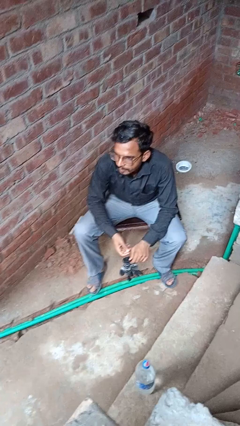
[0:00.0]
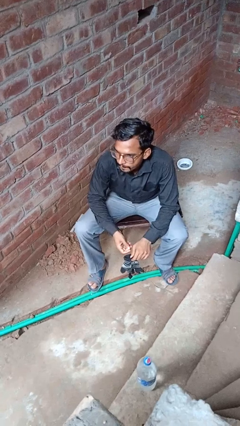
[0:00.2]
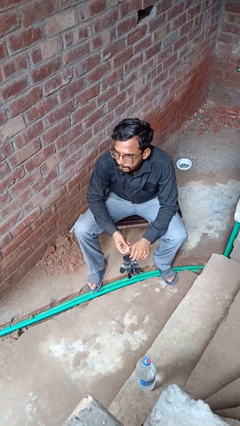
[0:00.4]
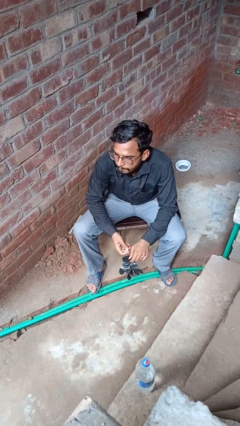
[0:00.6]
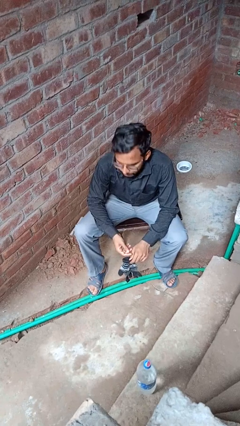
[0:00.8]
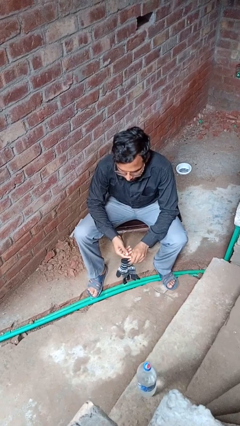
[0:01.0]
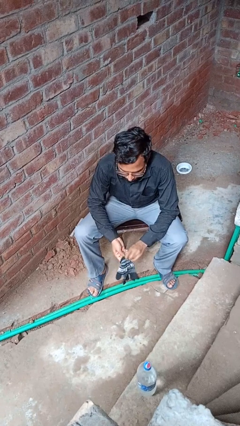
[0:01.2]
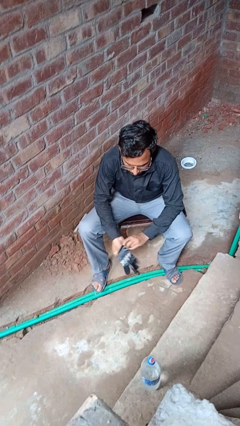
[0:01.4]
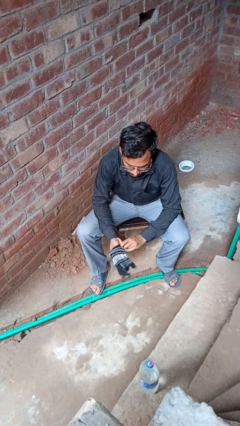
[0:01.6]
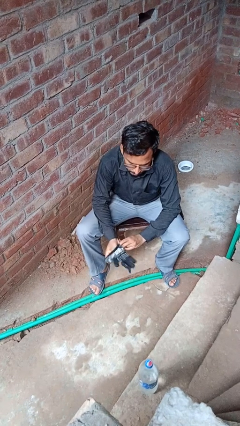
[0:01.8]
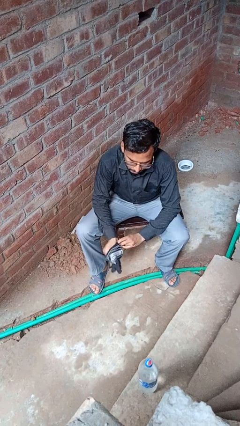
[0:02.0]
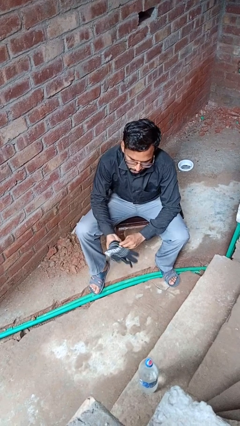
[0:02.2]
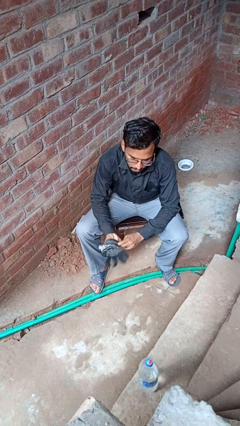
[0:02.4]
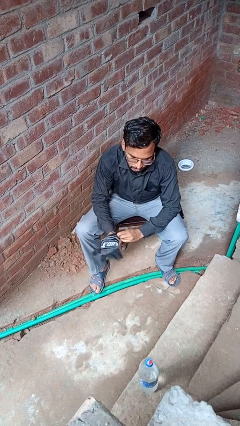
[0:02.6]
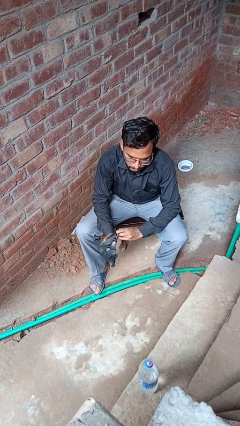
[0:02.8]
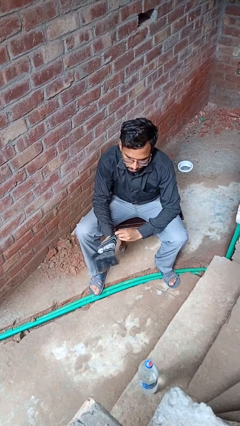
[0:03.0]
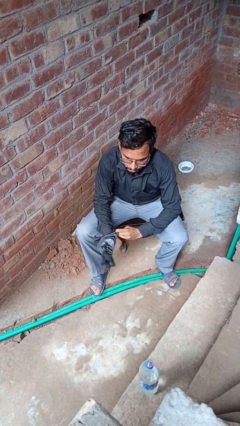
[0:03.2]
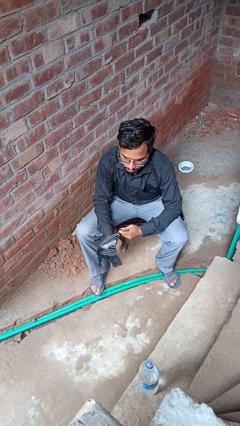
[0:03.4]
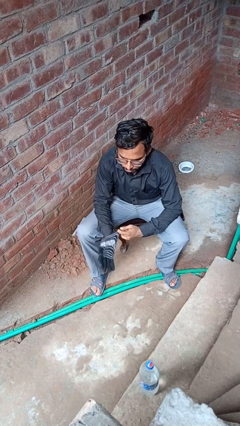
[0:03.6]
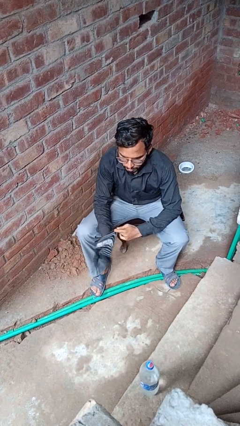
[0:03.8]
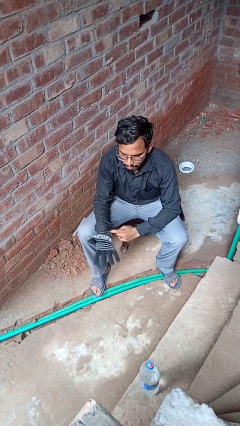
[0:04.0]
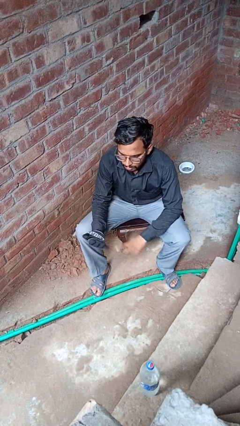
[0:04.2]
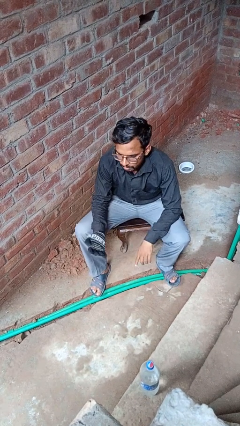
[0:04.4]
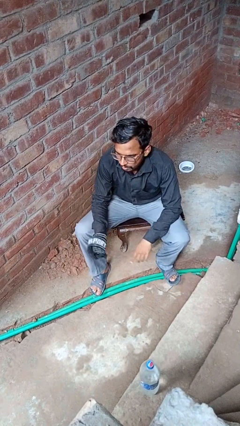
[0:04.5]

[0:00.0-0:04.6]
person puts on gloves

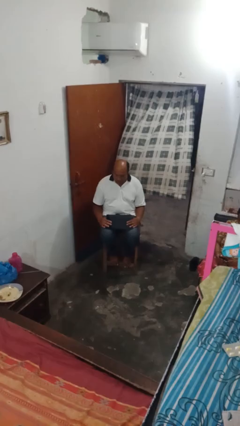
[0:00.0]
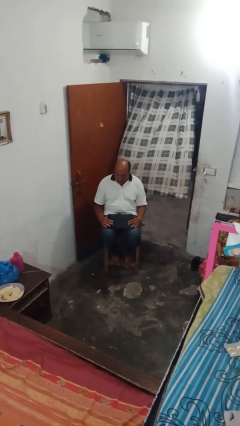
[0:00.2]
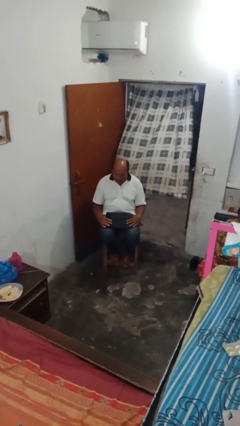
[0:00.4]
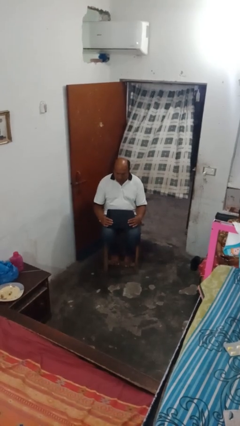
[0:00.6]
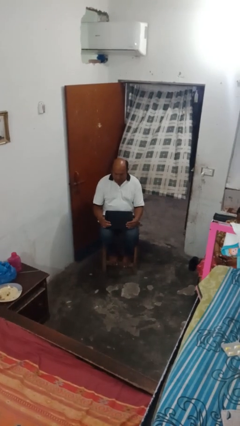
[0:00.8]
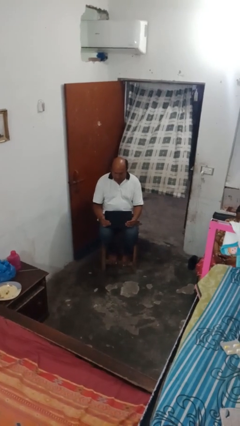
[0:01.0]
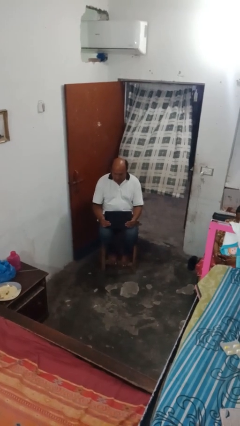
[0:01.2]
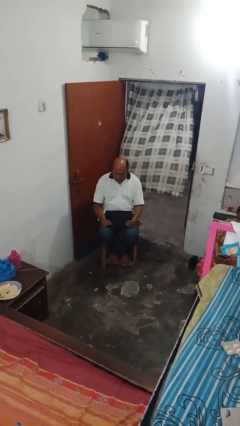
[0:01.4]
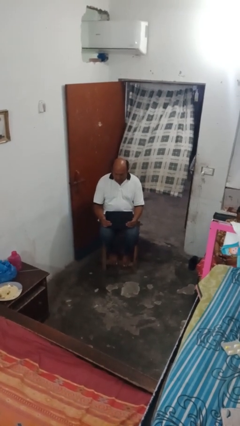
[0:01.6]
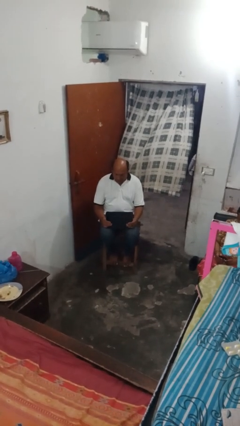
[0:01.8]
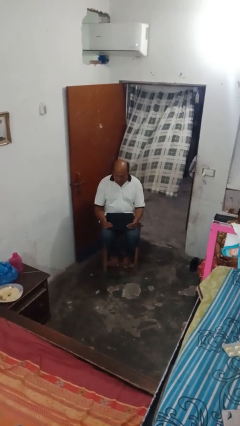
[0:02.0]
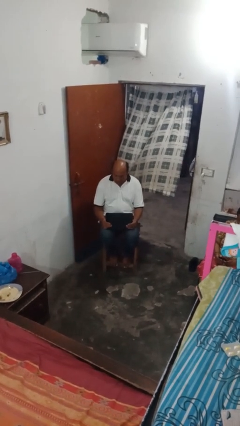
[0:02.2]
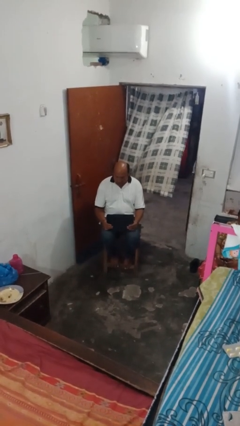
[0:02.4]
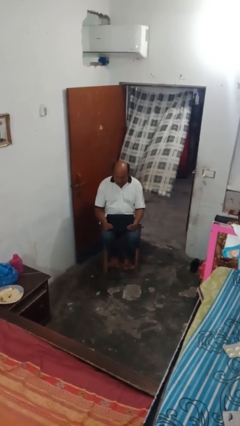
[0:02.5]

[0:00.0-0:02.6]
person opens laptop

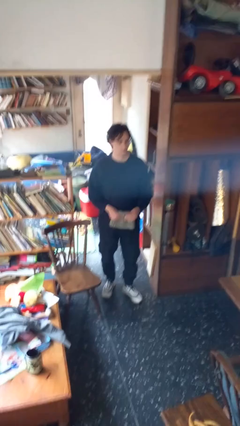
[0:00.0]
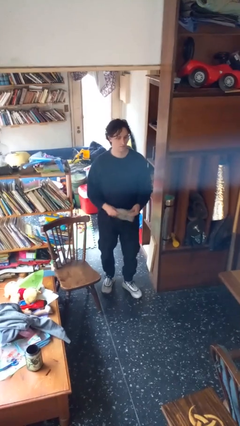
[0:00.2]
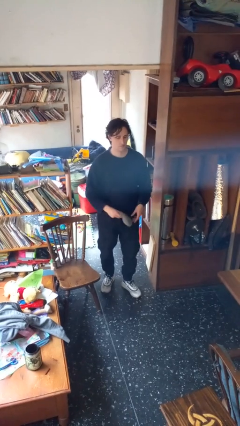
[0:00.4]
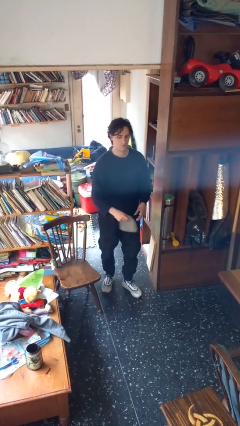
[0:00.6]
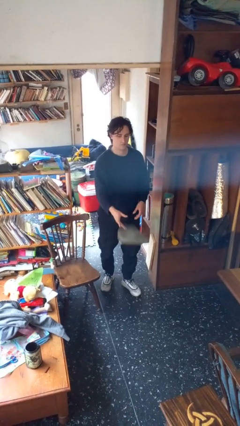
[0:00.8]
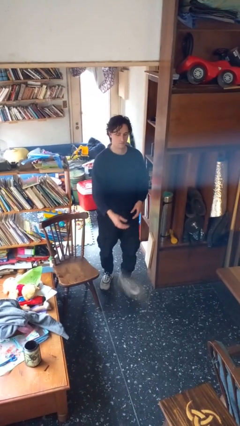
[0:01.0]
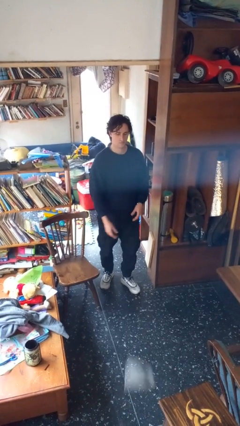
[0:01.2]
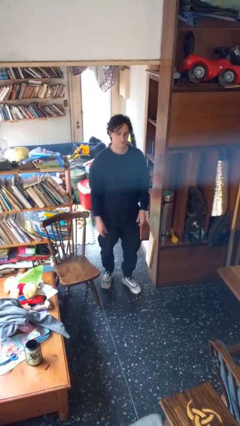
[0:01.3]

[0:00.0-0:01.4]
person throws object to ground

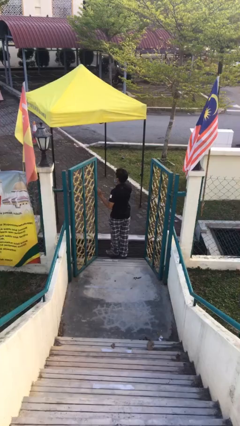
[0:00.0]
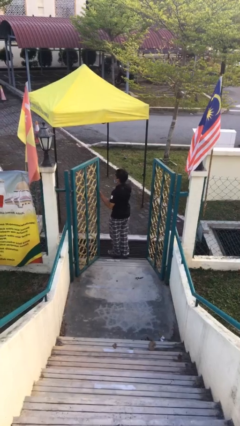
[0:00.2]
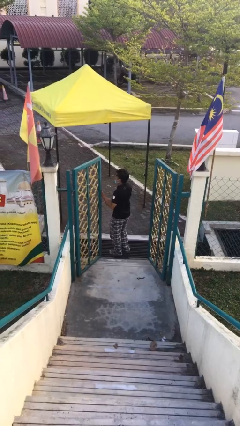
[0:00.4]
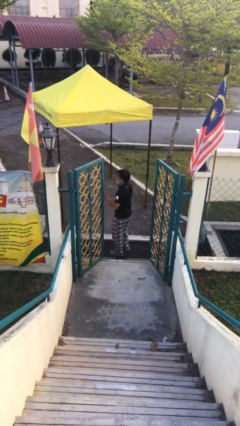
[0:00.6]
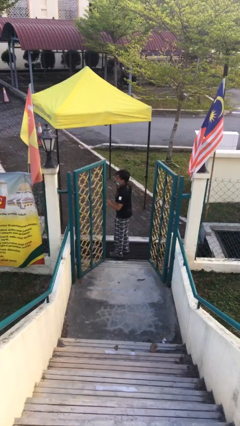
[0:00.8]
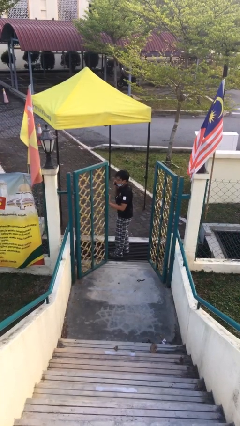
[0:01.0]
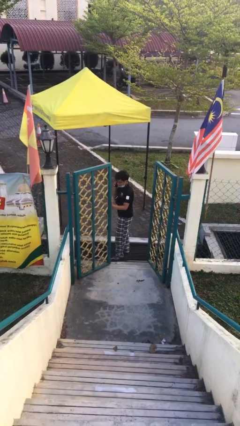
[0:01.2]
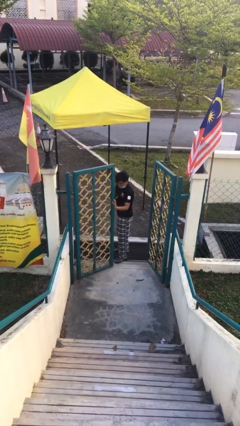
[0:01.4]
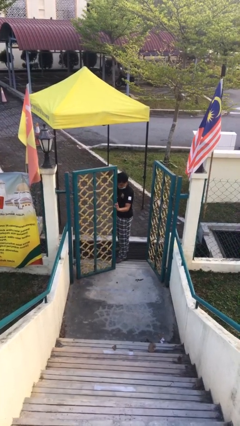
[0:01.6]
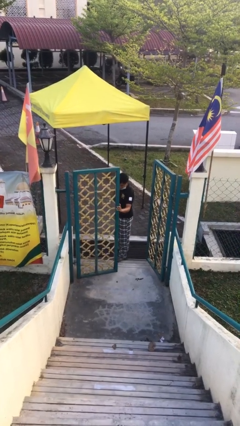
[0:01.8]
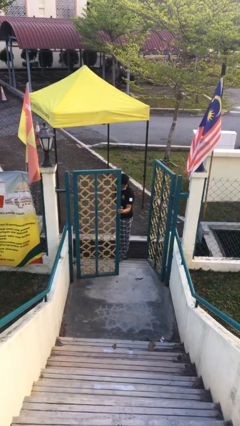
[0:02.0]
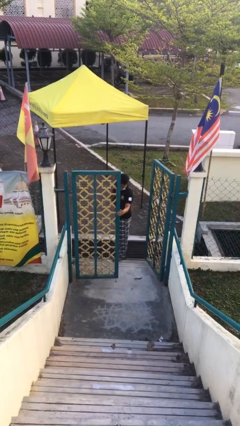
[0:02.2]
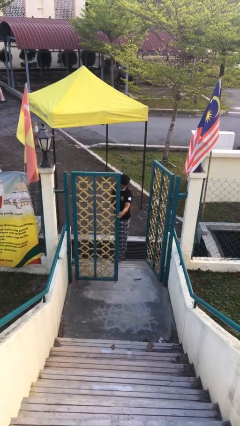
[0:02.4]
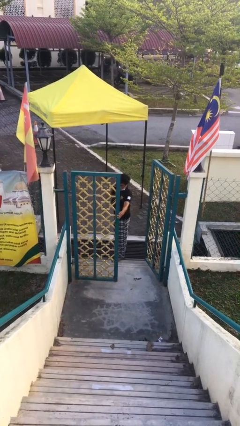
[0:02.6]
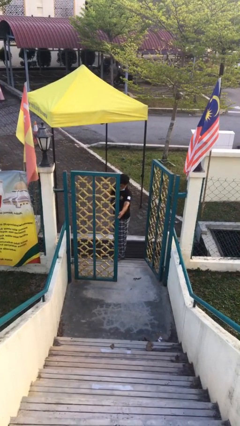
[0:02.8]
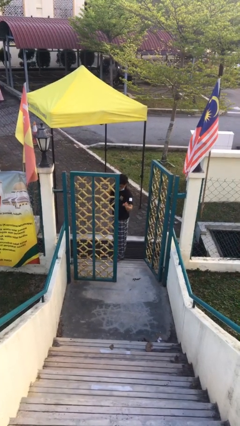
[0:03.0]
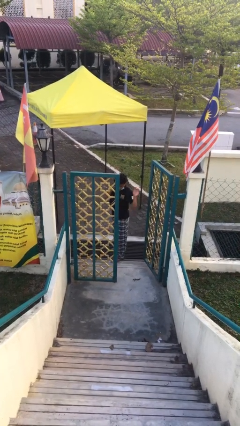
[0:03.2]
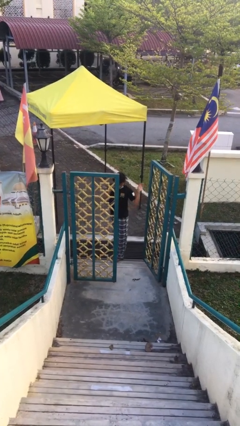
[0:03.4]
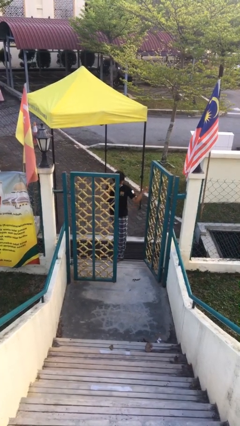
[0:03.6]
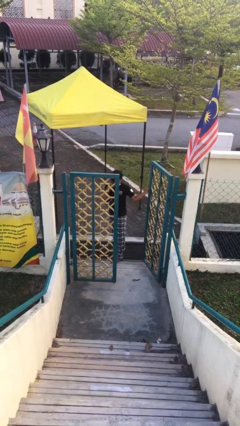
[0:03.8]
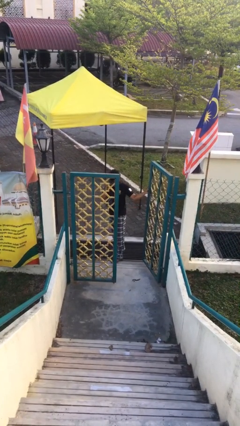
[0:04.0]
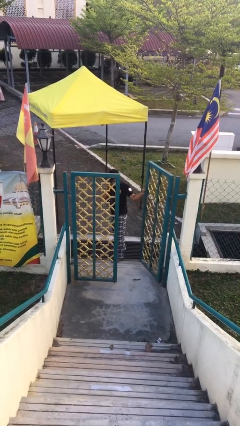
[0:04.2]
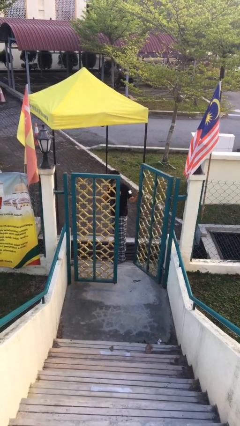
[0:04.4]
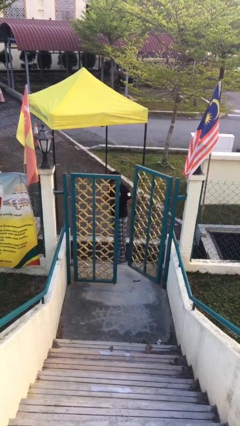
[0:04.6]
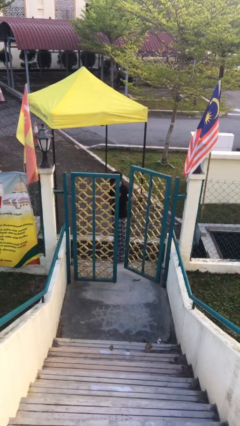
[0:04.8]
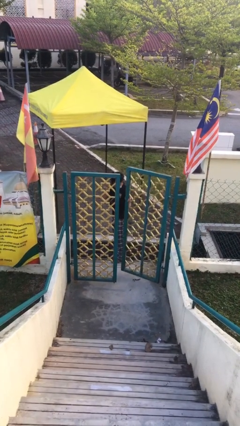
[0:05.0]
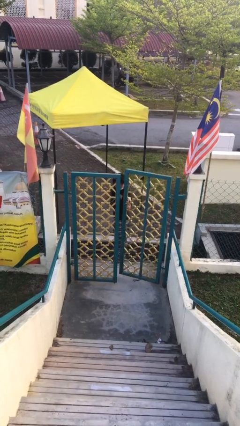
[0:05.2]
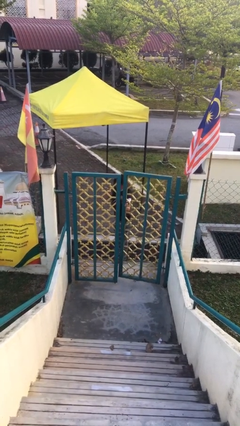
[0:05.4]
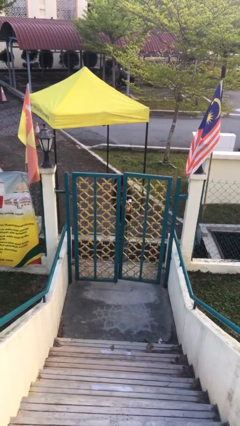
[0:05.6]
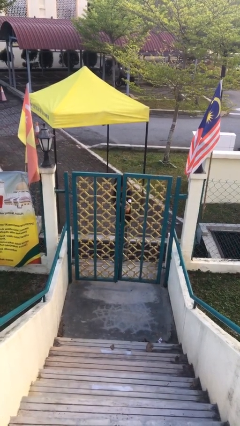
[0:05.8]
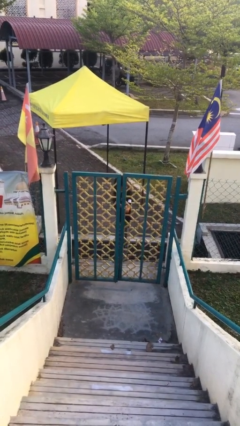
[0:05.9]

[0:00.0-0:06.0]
person closes facility door

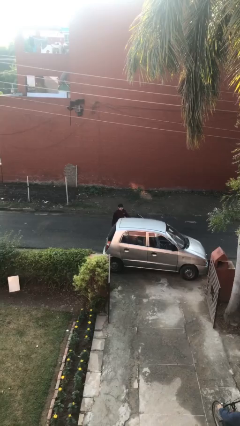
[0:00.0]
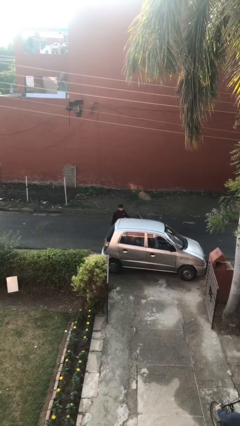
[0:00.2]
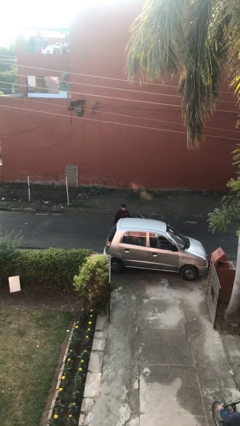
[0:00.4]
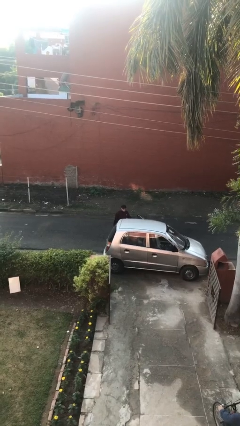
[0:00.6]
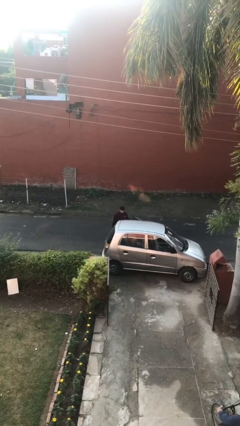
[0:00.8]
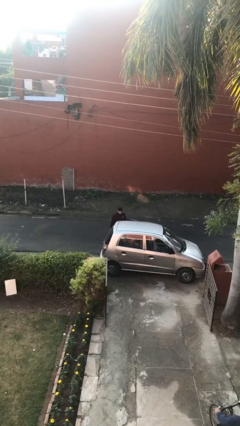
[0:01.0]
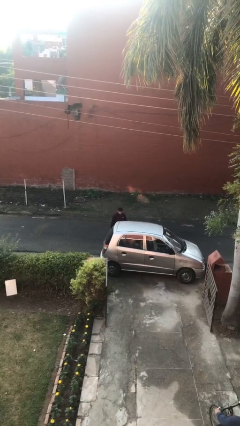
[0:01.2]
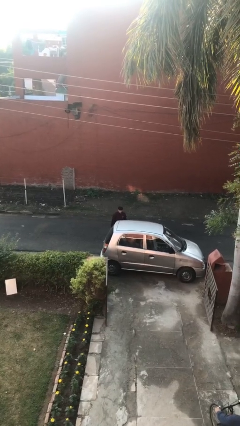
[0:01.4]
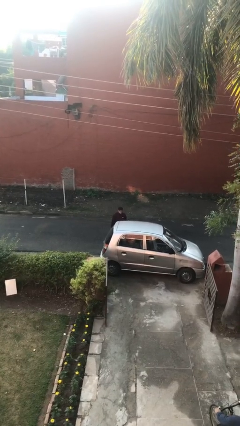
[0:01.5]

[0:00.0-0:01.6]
person closes car door

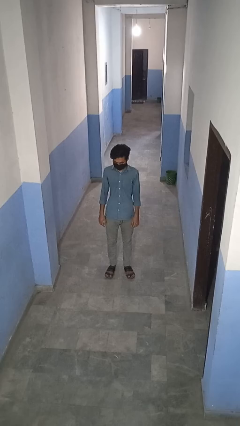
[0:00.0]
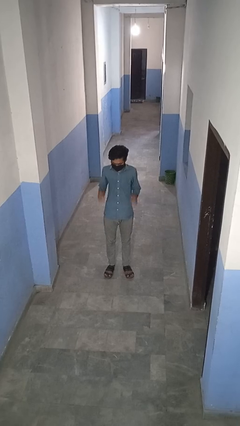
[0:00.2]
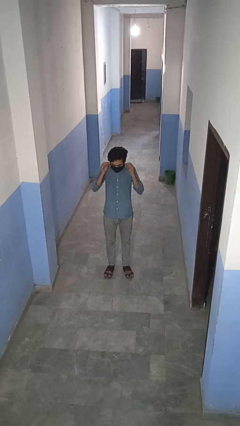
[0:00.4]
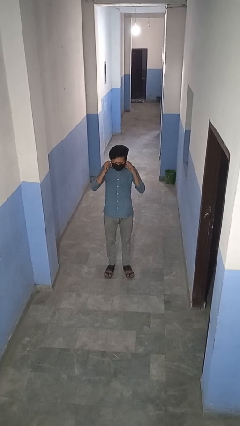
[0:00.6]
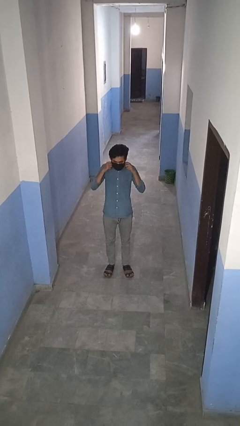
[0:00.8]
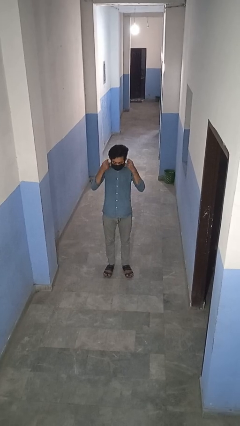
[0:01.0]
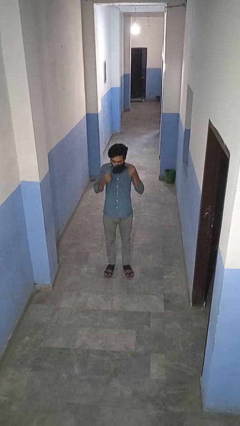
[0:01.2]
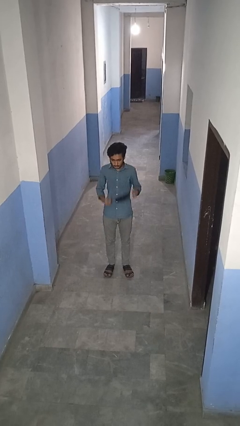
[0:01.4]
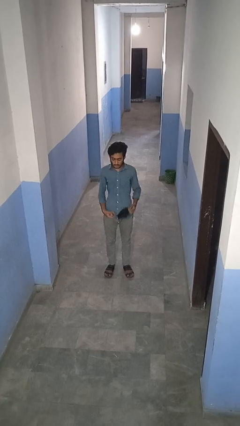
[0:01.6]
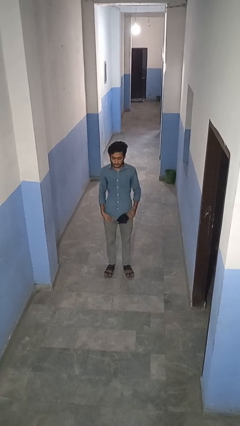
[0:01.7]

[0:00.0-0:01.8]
person takes off facemask
